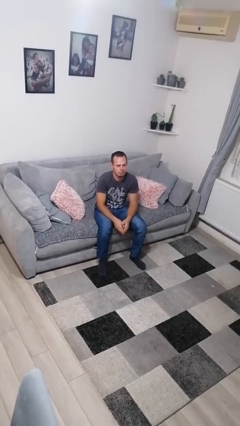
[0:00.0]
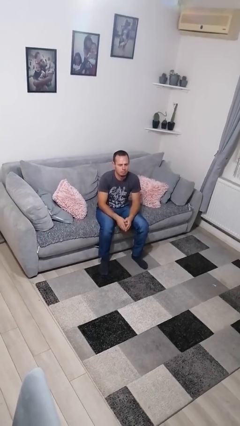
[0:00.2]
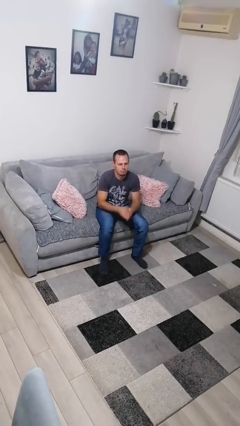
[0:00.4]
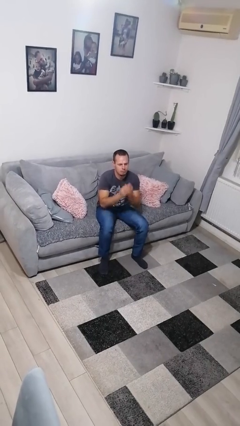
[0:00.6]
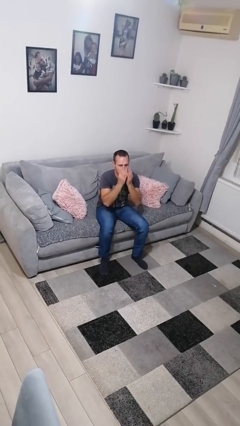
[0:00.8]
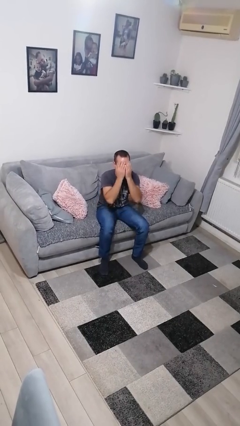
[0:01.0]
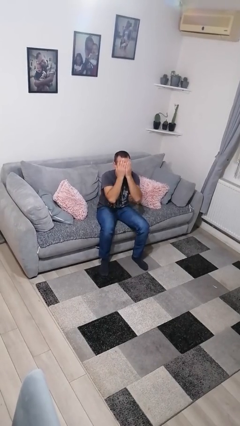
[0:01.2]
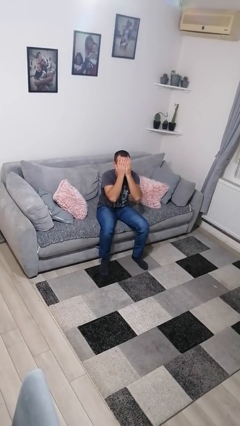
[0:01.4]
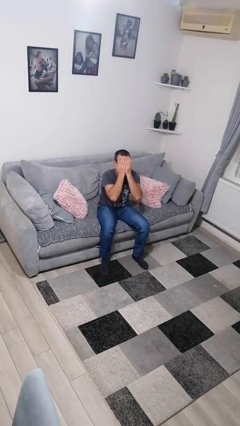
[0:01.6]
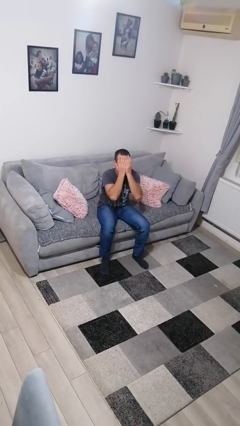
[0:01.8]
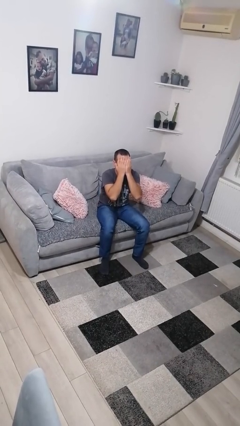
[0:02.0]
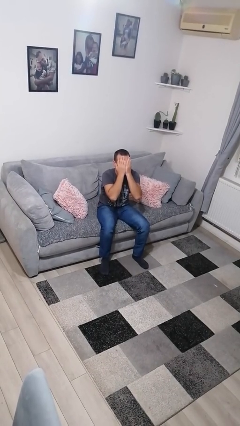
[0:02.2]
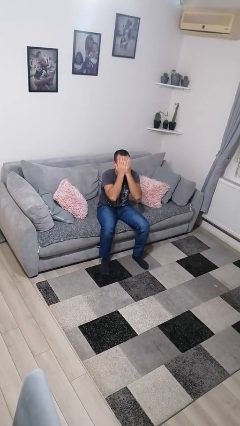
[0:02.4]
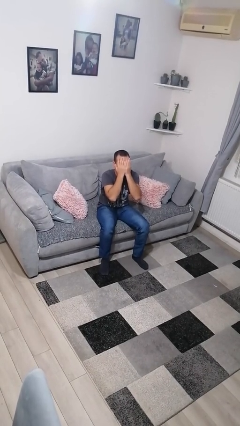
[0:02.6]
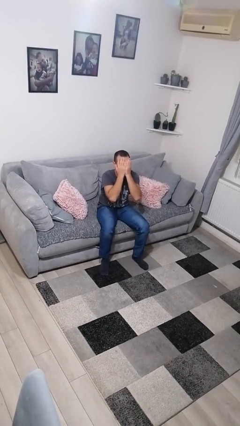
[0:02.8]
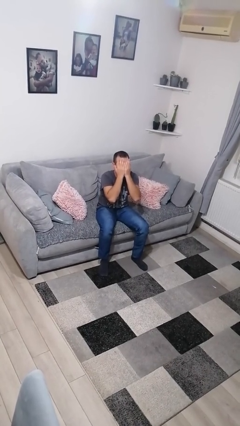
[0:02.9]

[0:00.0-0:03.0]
person covers face with hands

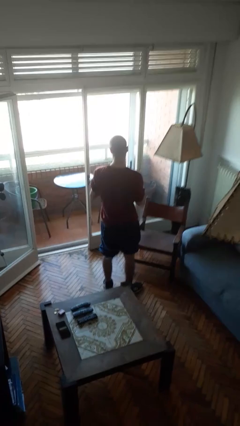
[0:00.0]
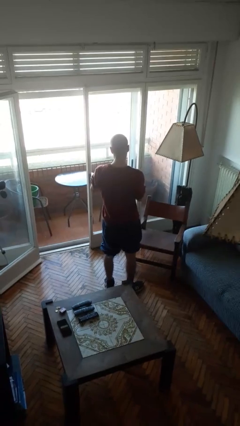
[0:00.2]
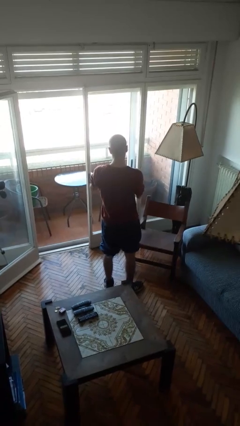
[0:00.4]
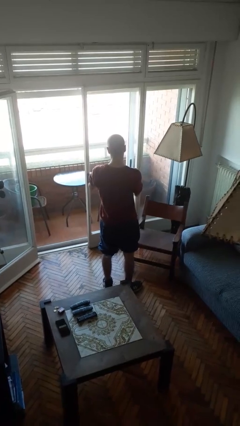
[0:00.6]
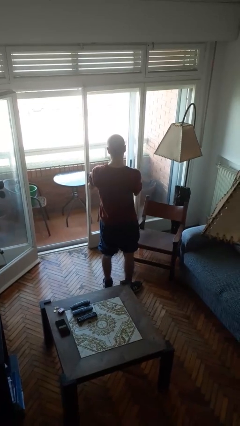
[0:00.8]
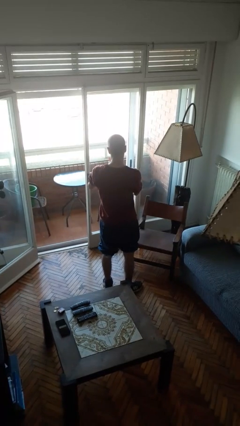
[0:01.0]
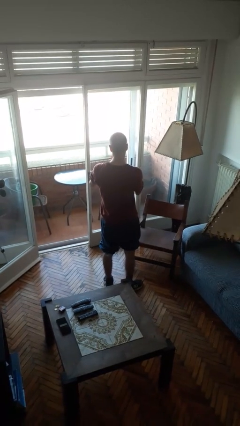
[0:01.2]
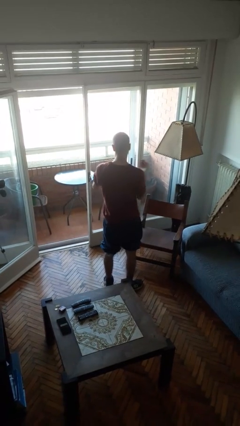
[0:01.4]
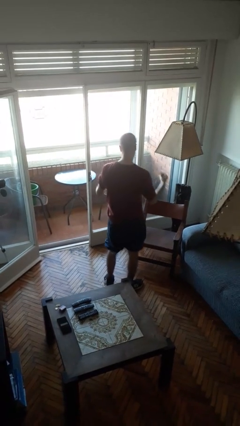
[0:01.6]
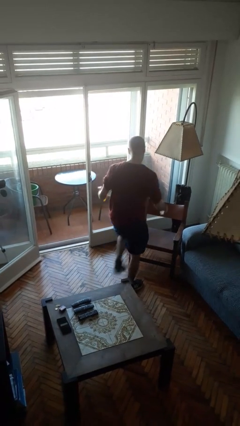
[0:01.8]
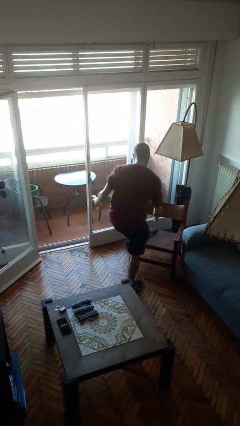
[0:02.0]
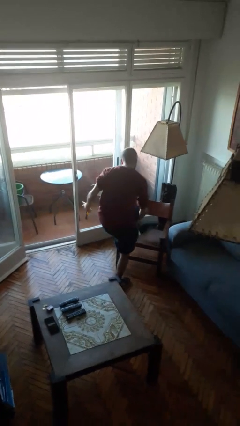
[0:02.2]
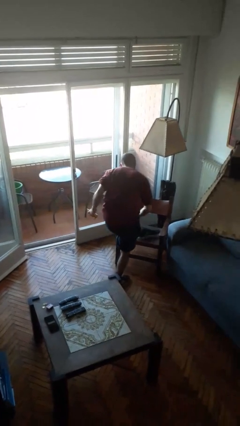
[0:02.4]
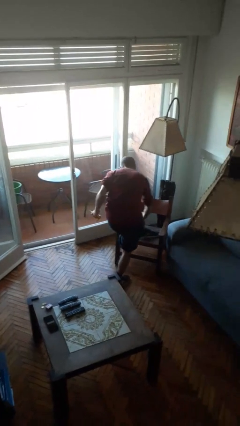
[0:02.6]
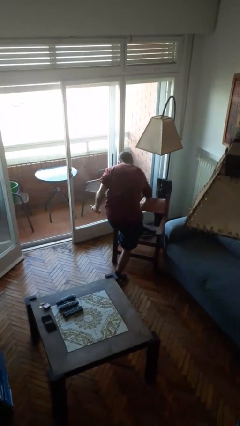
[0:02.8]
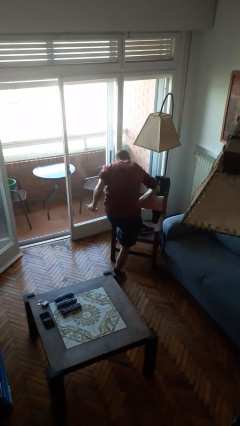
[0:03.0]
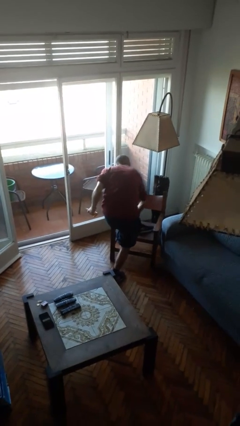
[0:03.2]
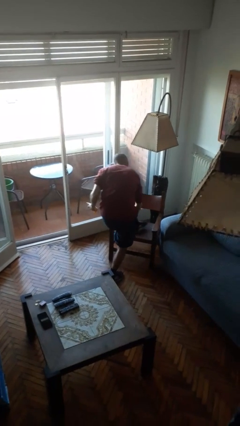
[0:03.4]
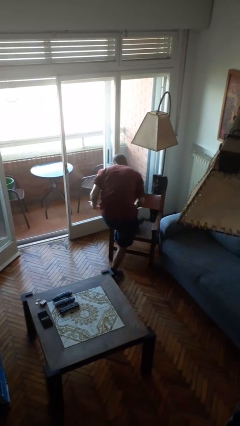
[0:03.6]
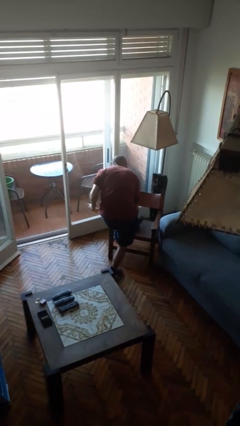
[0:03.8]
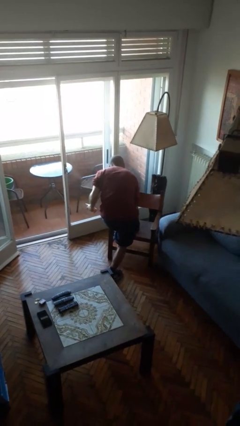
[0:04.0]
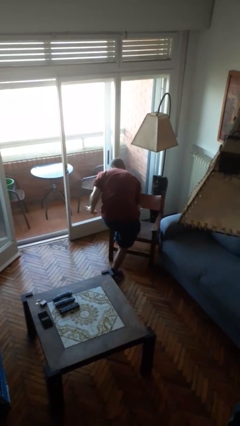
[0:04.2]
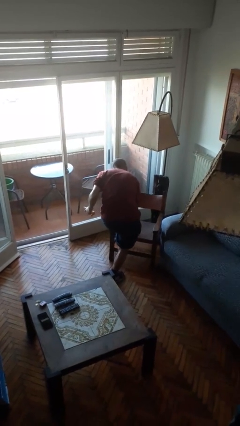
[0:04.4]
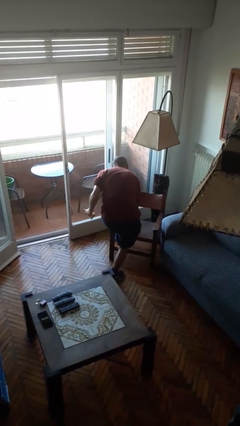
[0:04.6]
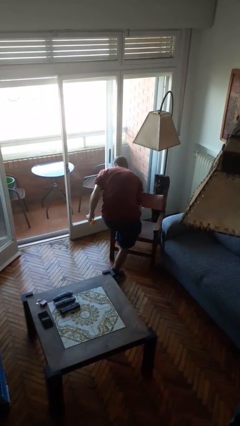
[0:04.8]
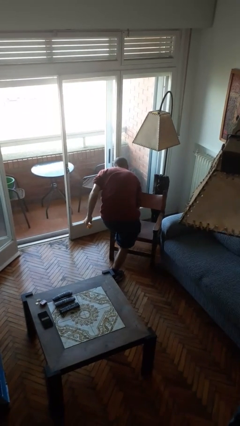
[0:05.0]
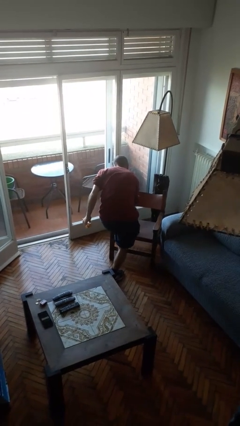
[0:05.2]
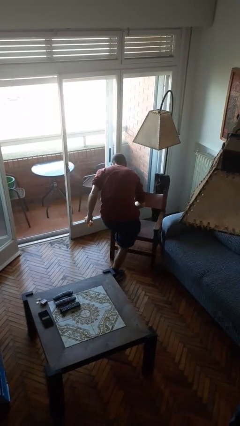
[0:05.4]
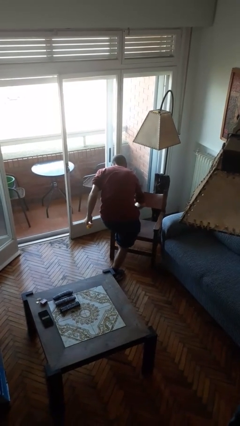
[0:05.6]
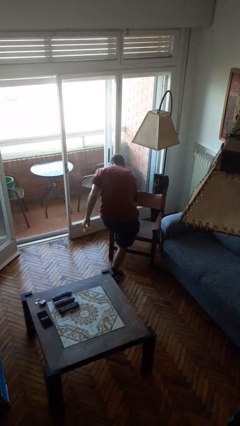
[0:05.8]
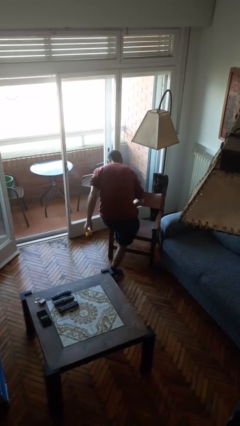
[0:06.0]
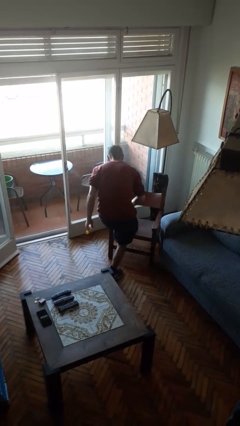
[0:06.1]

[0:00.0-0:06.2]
person applies sunscreen

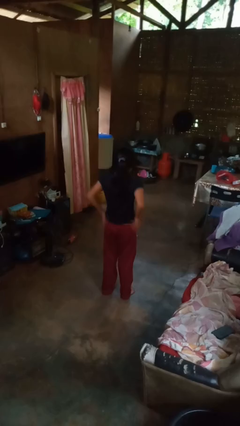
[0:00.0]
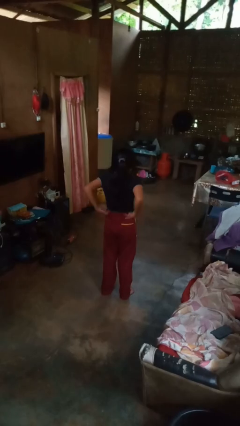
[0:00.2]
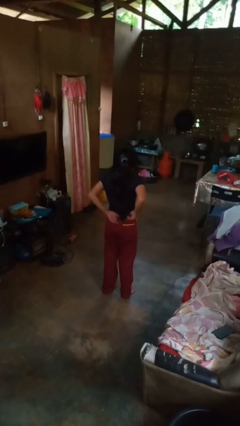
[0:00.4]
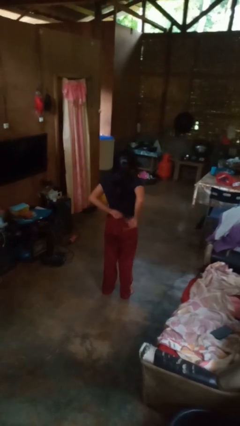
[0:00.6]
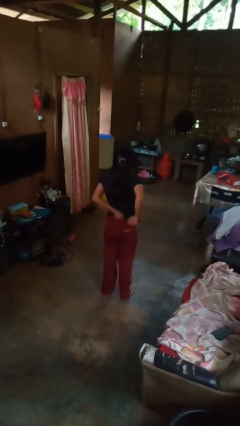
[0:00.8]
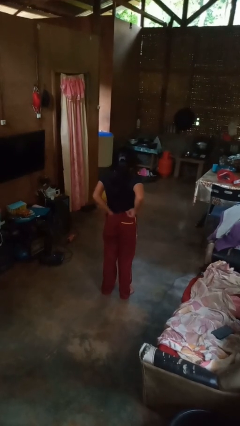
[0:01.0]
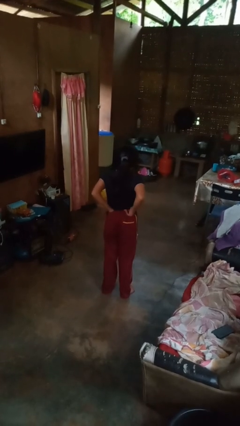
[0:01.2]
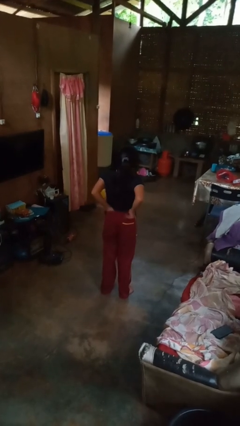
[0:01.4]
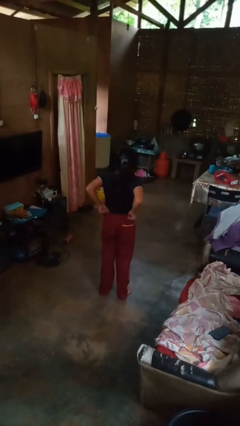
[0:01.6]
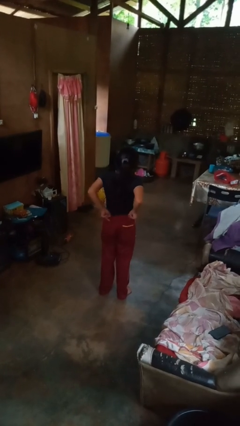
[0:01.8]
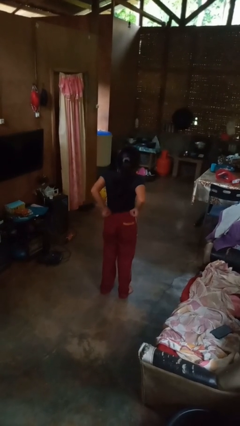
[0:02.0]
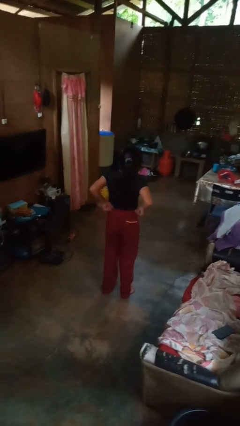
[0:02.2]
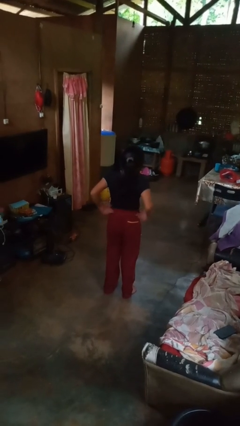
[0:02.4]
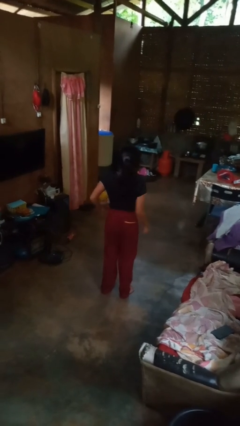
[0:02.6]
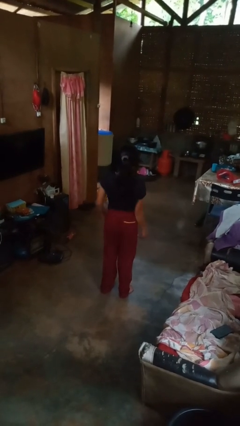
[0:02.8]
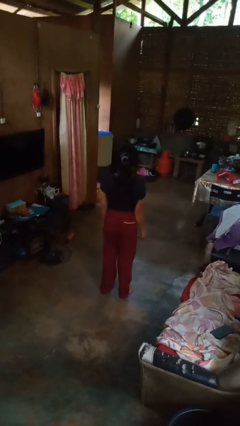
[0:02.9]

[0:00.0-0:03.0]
person tucks in shirt

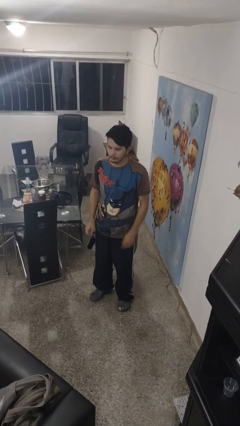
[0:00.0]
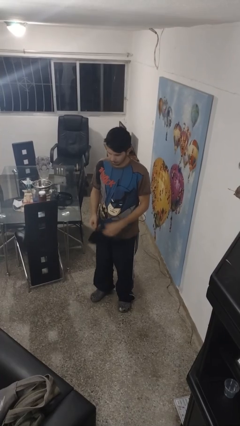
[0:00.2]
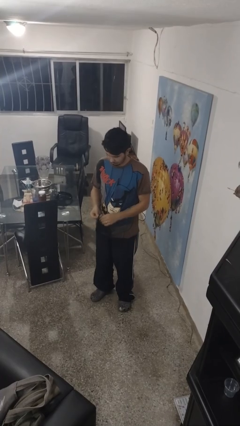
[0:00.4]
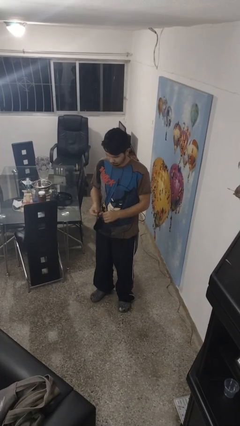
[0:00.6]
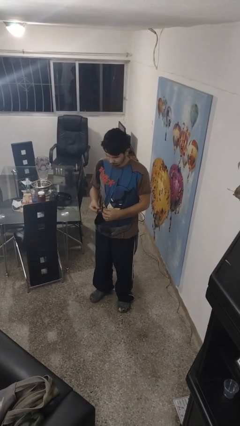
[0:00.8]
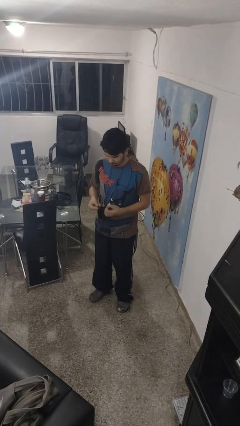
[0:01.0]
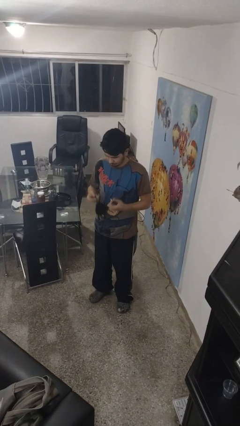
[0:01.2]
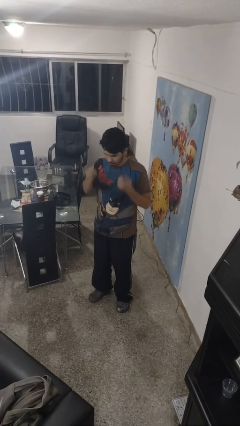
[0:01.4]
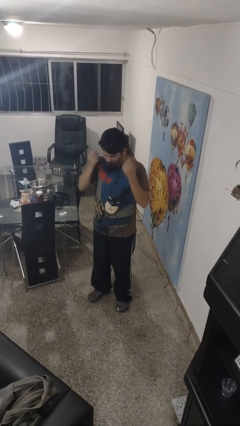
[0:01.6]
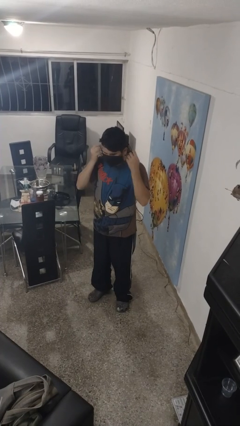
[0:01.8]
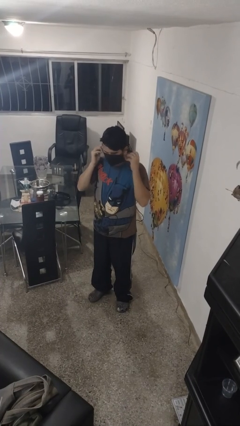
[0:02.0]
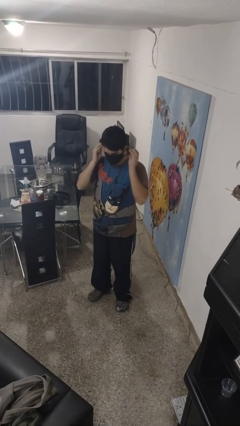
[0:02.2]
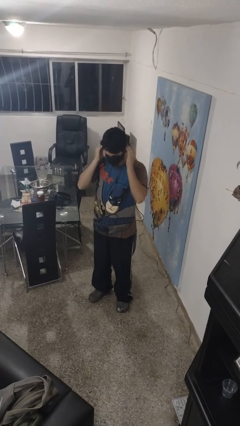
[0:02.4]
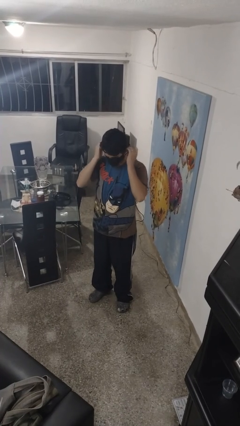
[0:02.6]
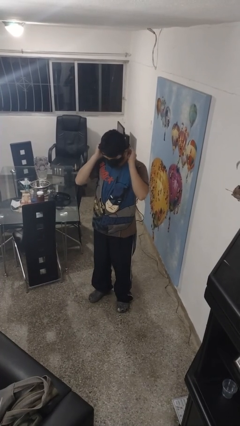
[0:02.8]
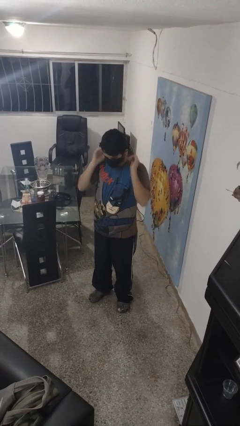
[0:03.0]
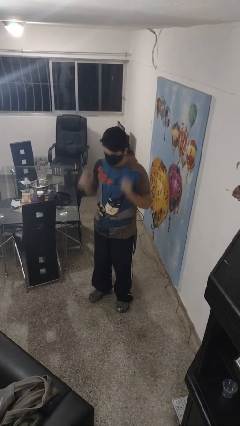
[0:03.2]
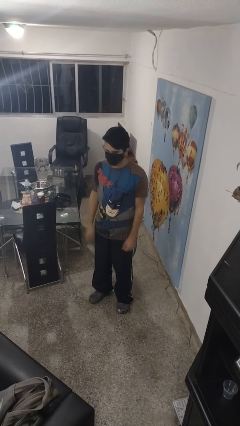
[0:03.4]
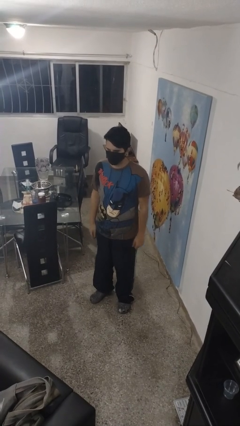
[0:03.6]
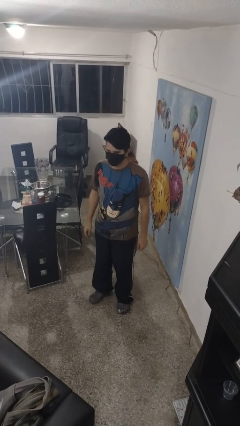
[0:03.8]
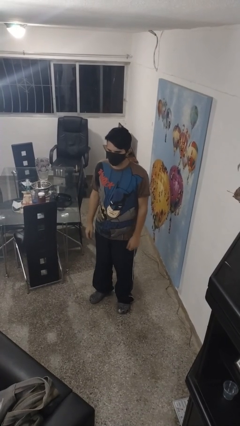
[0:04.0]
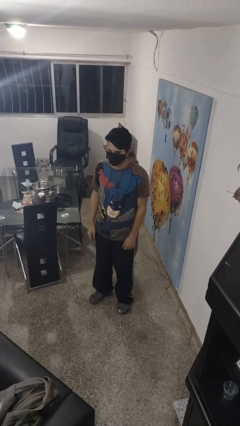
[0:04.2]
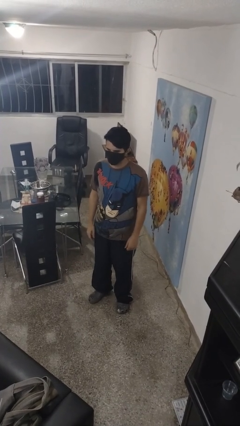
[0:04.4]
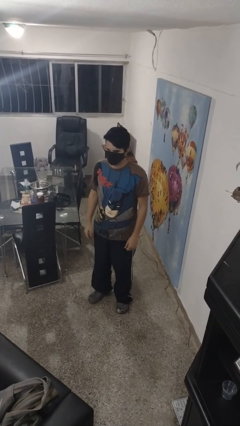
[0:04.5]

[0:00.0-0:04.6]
person puts on facemask

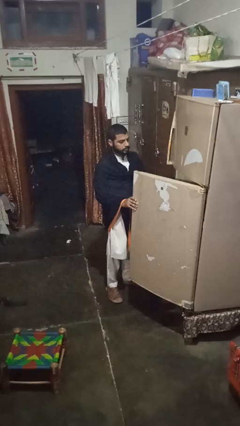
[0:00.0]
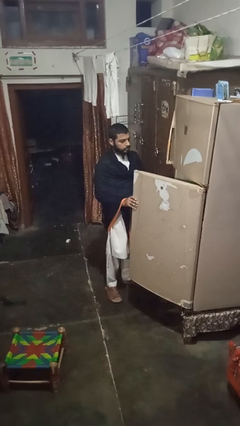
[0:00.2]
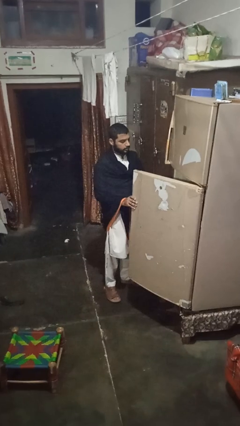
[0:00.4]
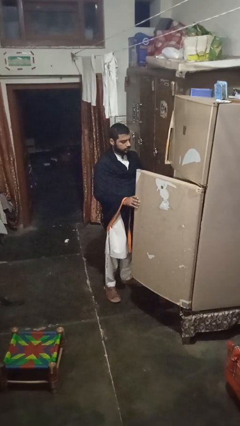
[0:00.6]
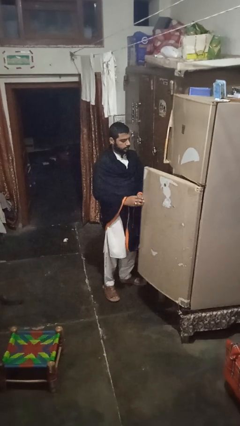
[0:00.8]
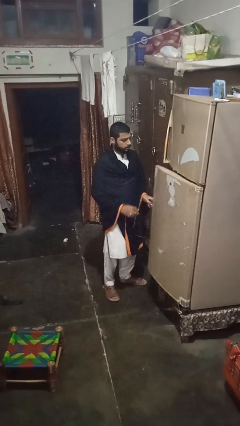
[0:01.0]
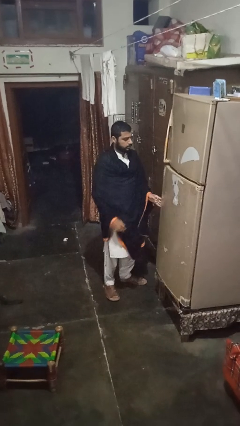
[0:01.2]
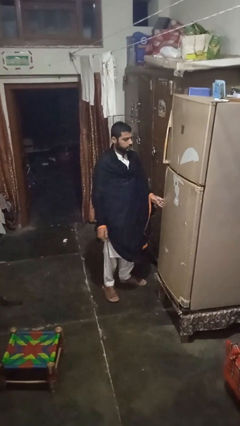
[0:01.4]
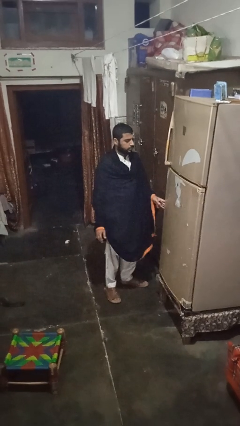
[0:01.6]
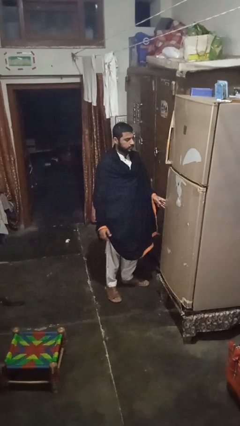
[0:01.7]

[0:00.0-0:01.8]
person closes refrigerator
